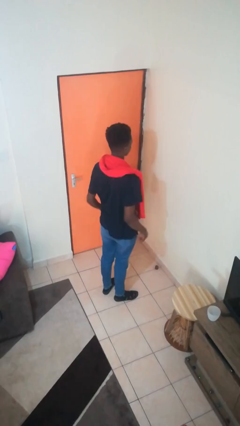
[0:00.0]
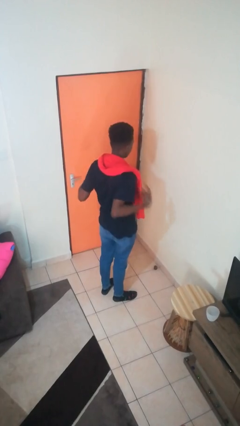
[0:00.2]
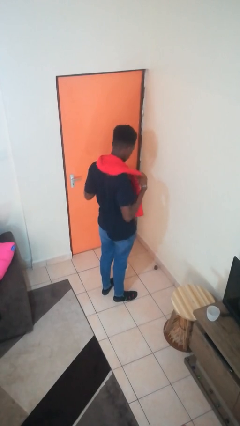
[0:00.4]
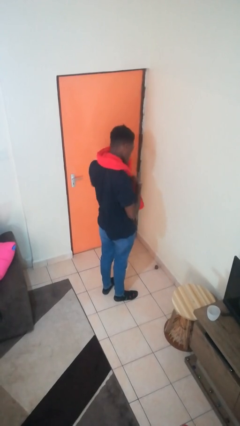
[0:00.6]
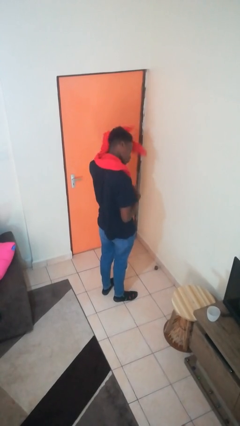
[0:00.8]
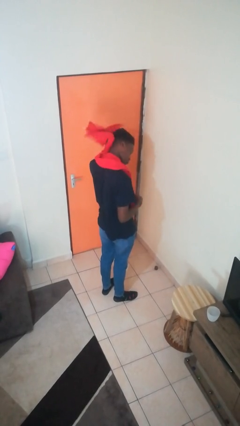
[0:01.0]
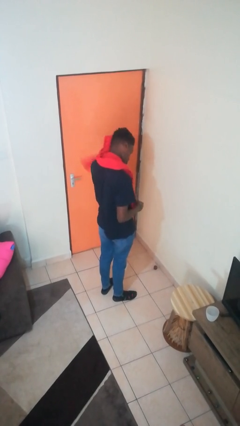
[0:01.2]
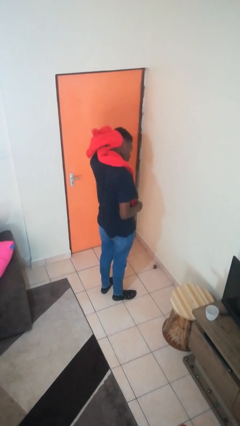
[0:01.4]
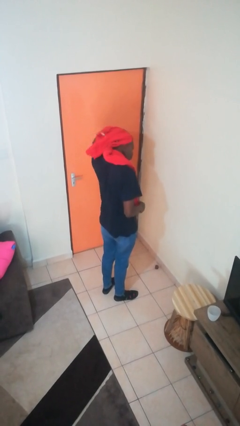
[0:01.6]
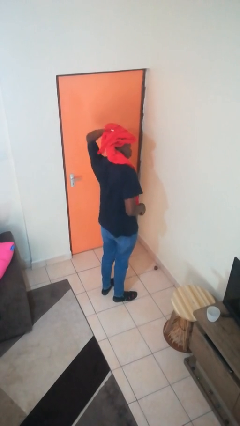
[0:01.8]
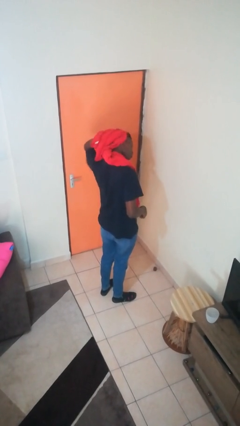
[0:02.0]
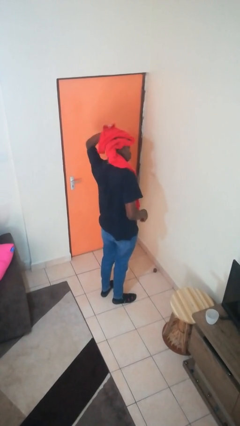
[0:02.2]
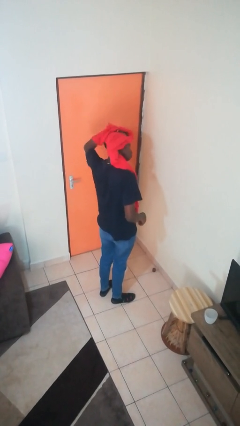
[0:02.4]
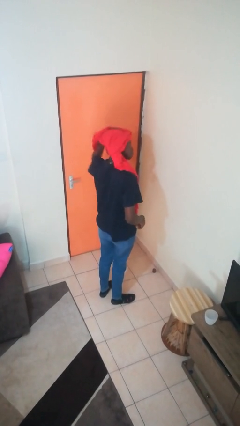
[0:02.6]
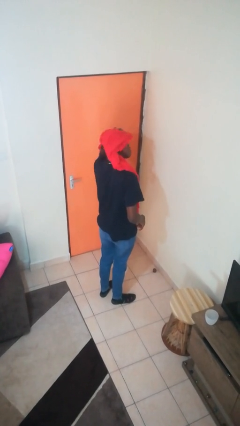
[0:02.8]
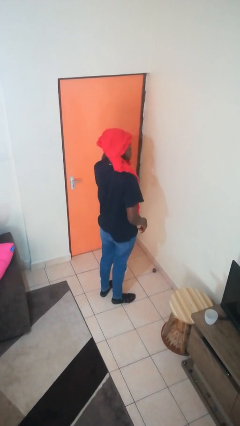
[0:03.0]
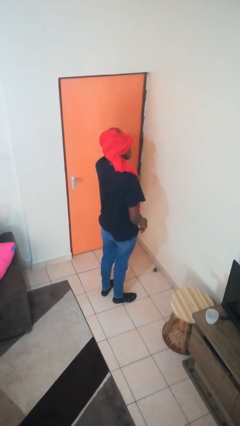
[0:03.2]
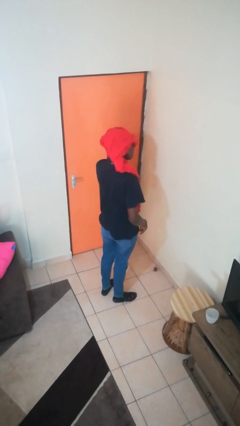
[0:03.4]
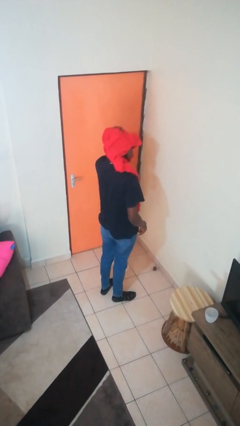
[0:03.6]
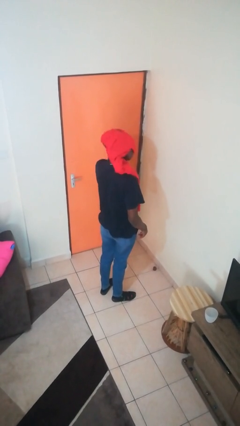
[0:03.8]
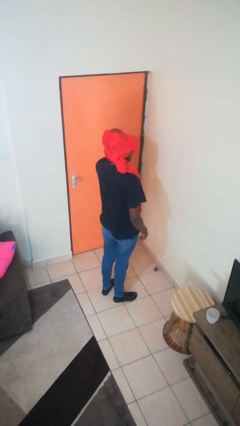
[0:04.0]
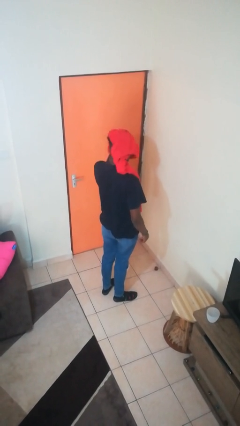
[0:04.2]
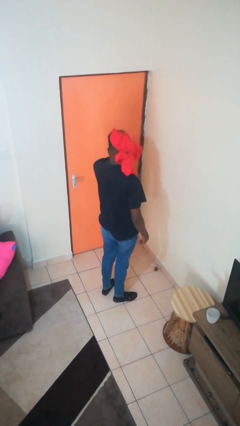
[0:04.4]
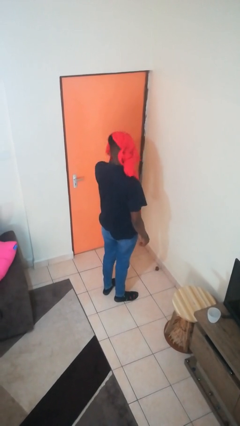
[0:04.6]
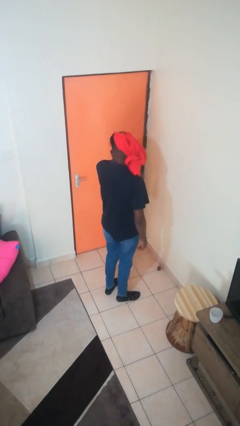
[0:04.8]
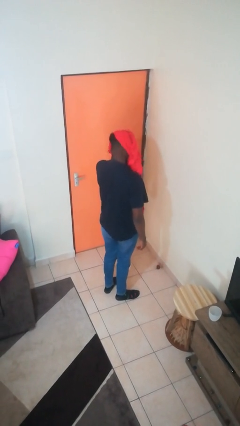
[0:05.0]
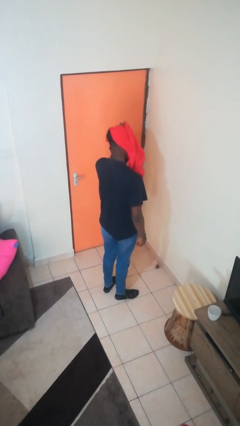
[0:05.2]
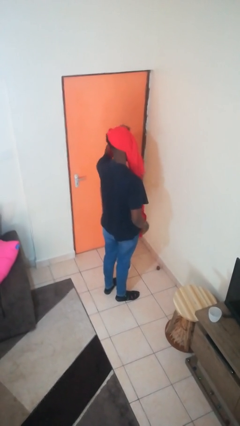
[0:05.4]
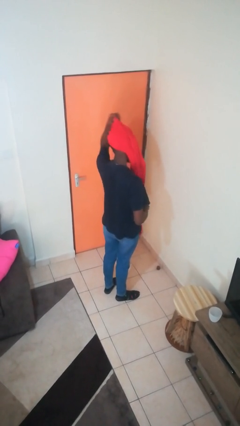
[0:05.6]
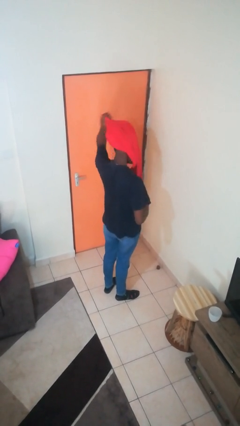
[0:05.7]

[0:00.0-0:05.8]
person dries hair with towel

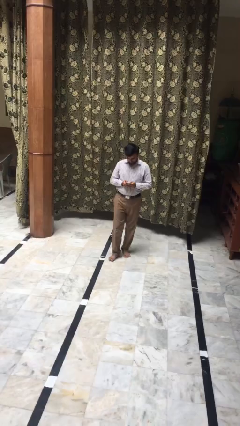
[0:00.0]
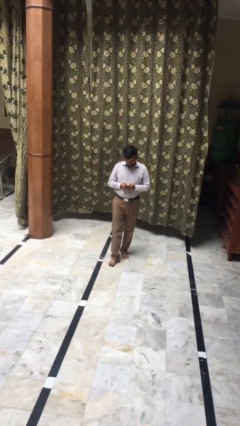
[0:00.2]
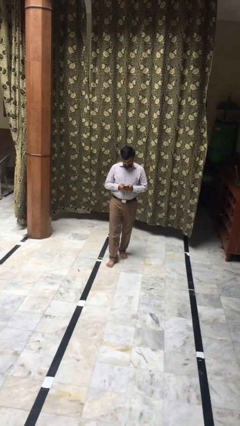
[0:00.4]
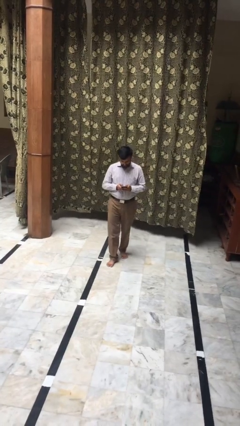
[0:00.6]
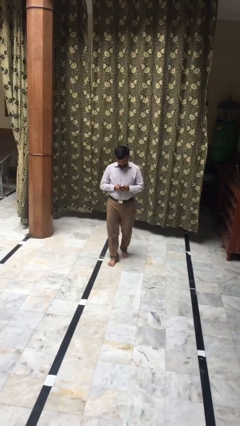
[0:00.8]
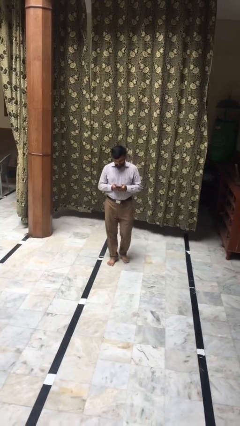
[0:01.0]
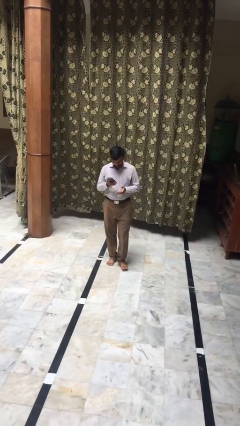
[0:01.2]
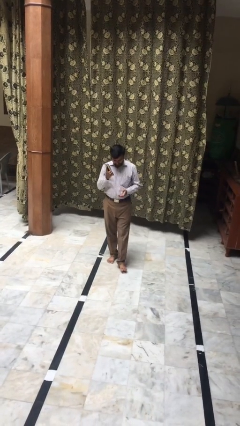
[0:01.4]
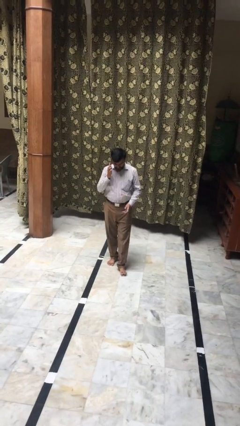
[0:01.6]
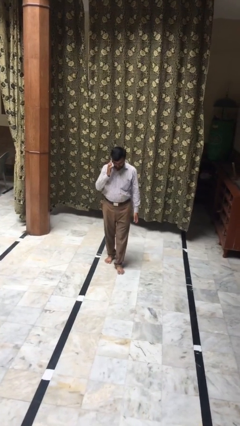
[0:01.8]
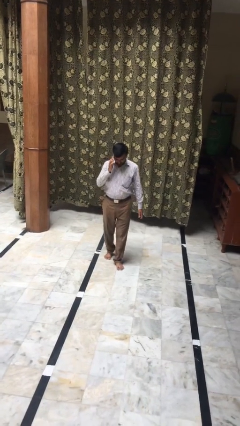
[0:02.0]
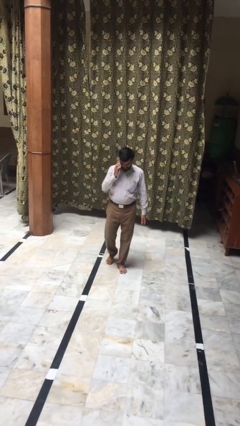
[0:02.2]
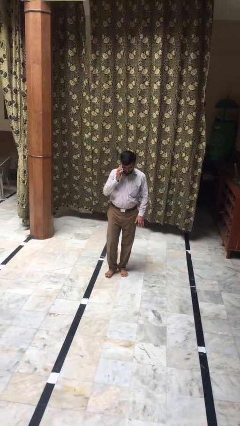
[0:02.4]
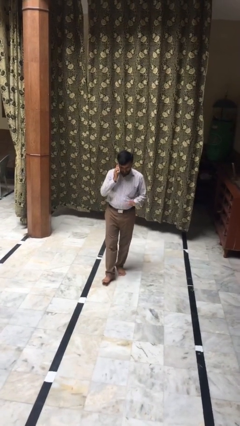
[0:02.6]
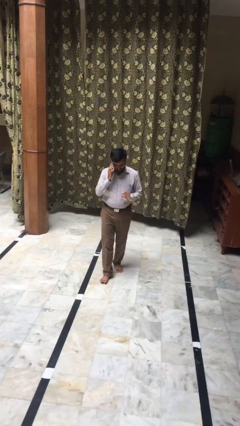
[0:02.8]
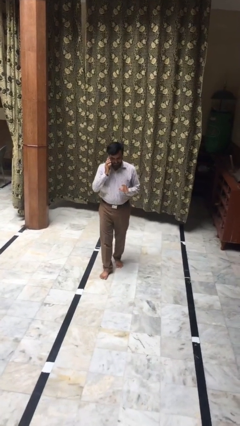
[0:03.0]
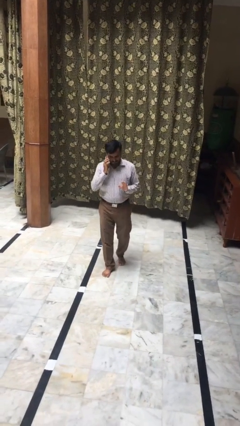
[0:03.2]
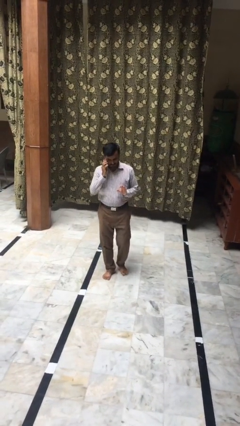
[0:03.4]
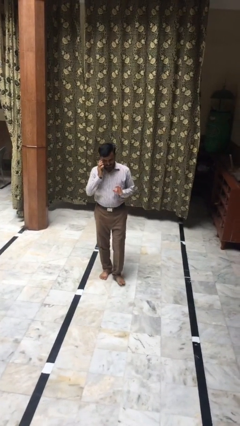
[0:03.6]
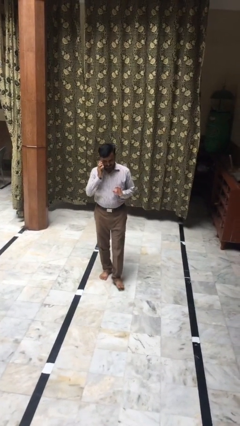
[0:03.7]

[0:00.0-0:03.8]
person talks on phone

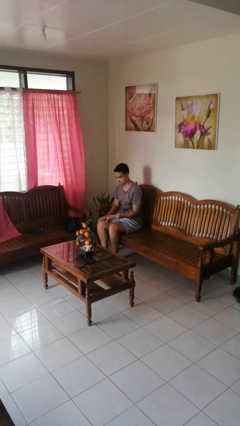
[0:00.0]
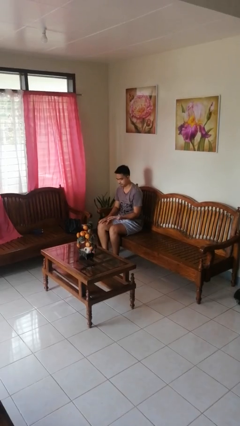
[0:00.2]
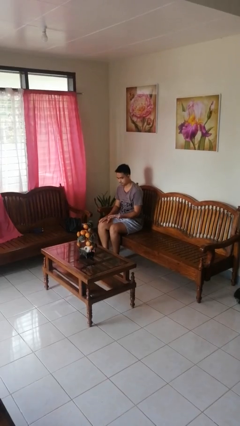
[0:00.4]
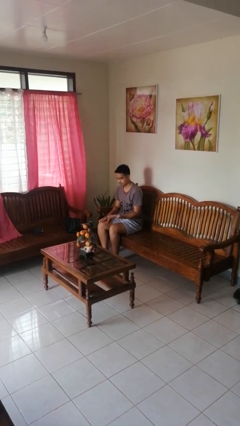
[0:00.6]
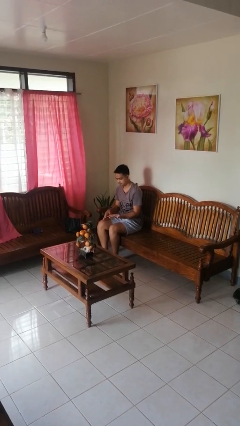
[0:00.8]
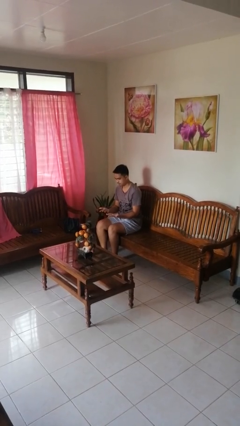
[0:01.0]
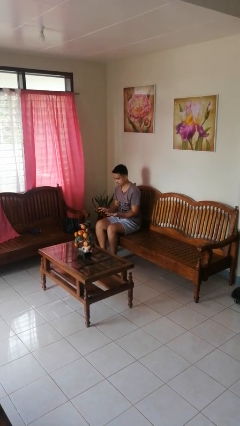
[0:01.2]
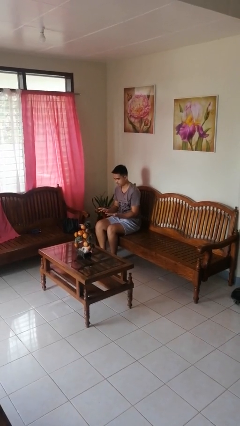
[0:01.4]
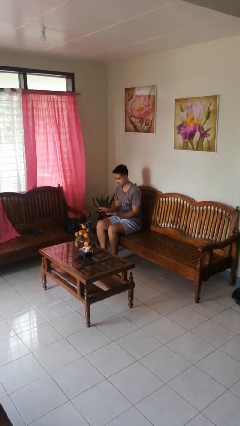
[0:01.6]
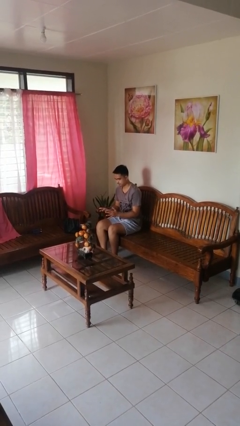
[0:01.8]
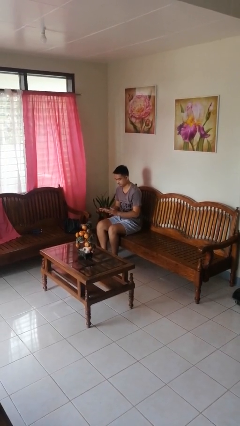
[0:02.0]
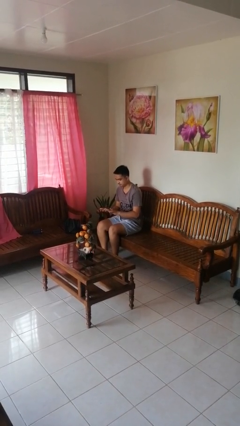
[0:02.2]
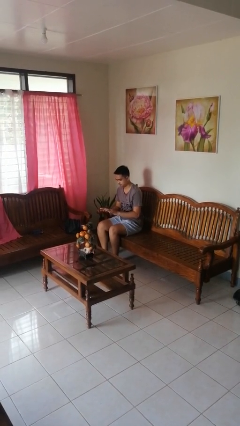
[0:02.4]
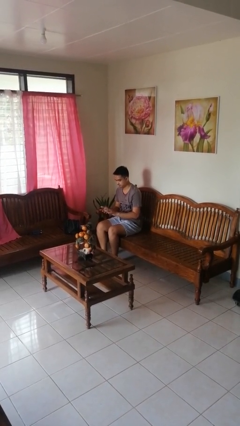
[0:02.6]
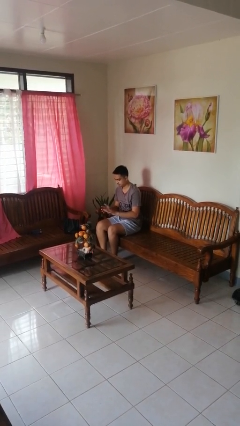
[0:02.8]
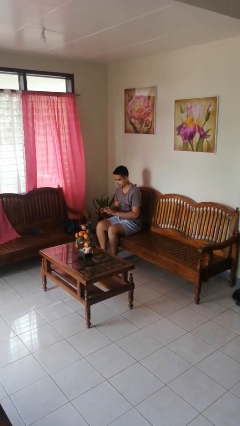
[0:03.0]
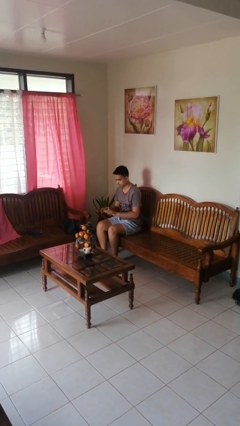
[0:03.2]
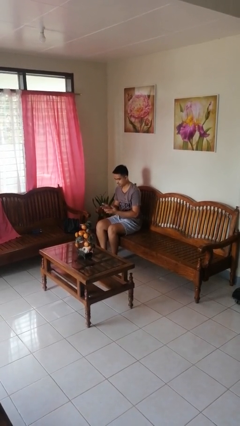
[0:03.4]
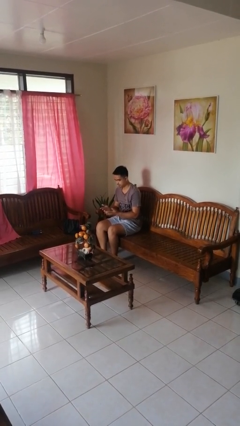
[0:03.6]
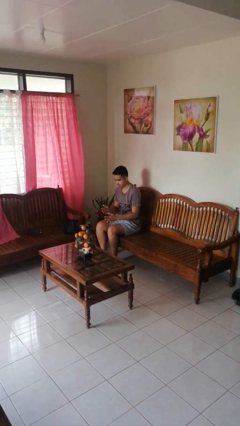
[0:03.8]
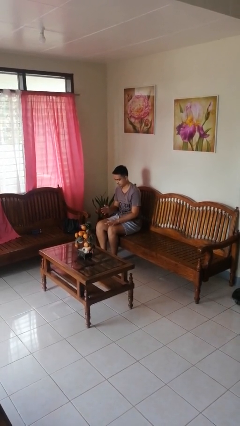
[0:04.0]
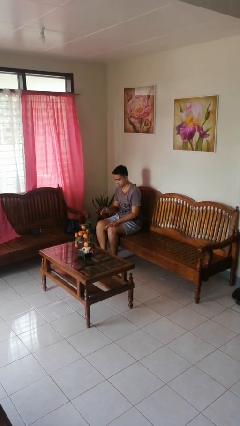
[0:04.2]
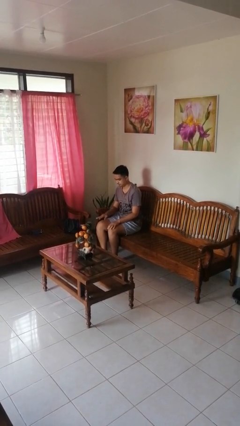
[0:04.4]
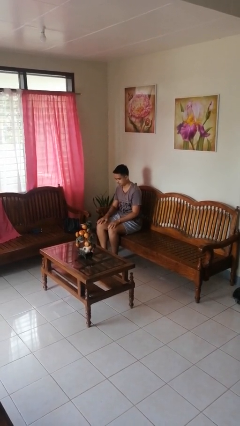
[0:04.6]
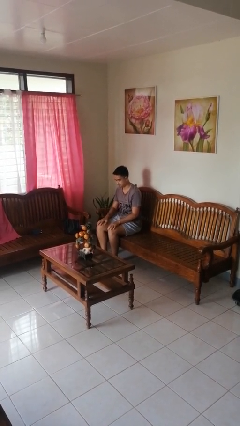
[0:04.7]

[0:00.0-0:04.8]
person looks at hands in lap

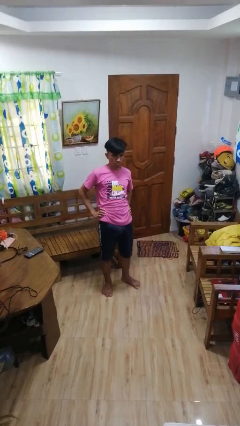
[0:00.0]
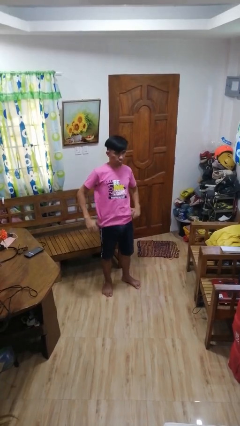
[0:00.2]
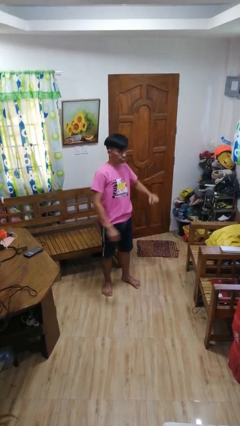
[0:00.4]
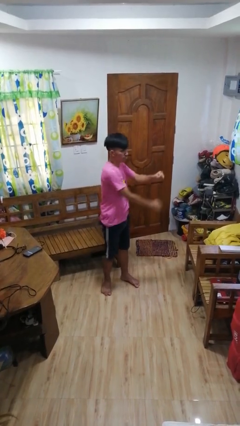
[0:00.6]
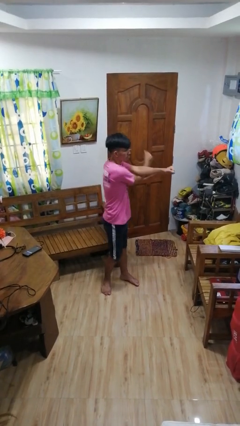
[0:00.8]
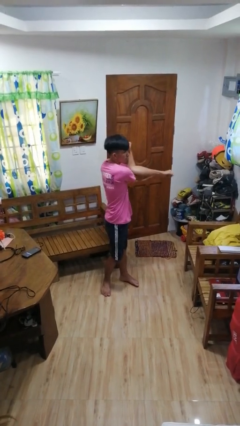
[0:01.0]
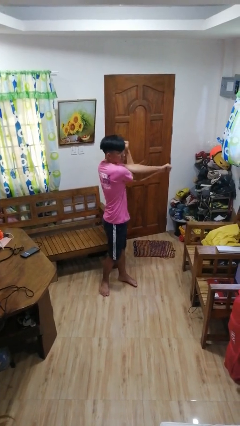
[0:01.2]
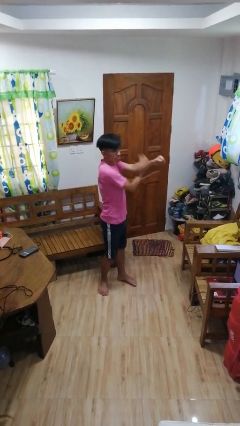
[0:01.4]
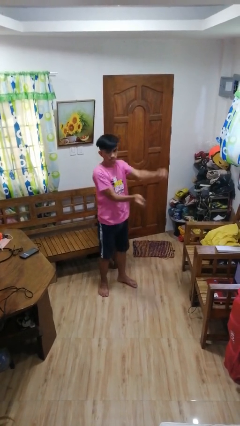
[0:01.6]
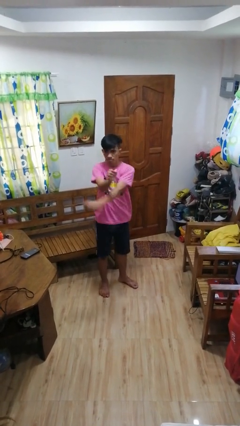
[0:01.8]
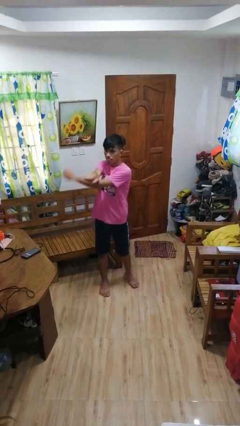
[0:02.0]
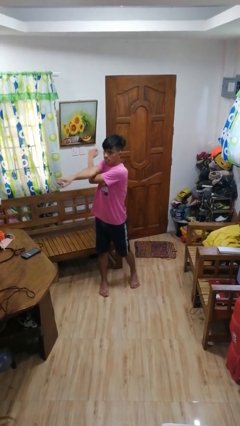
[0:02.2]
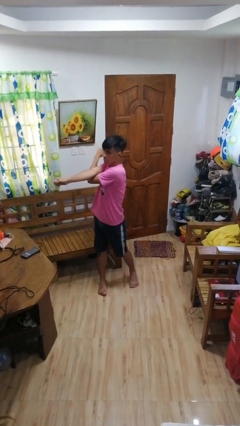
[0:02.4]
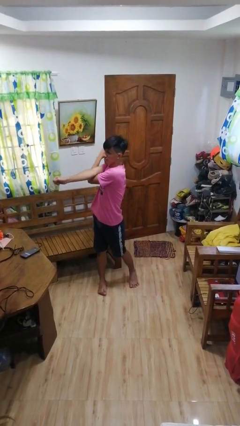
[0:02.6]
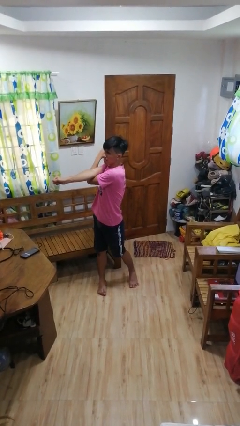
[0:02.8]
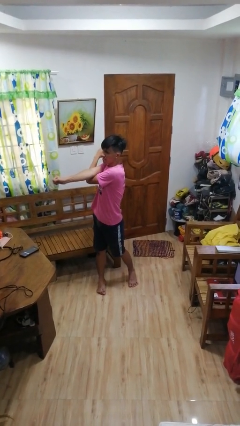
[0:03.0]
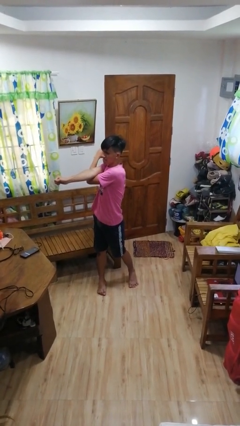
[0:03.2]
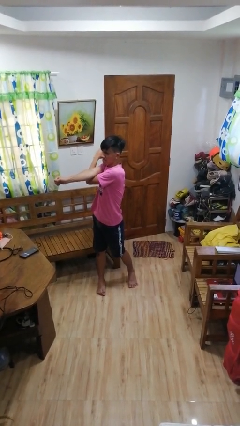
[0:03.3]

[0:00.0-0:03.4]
person stretches arms to side
